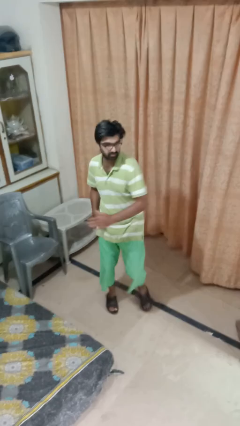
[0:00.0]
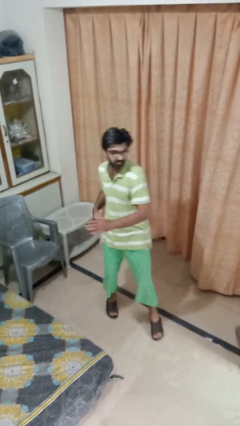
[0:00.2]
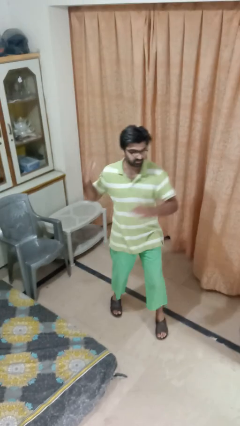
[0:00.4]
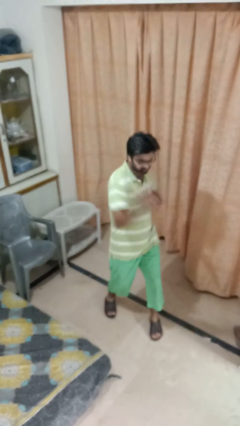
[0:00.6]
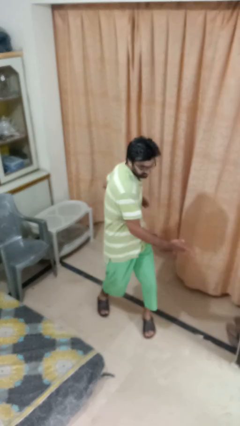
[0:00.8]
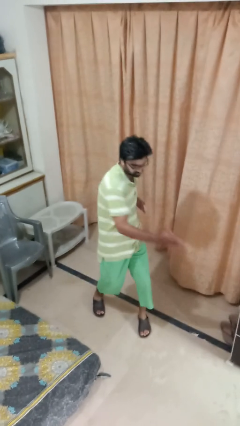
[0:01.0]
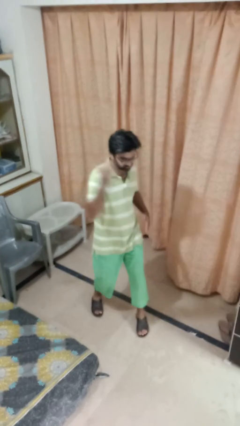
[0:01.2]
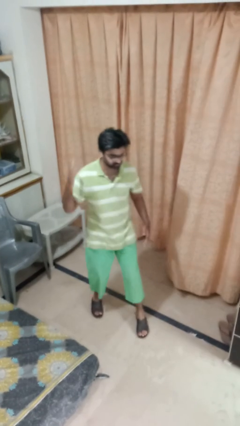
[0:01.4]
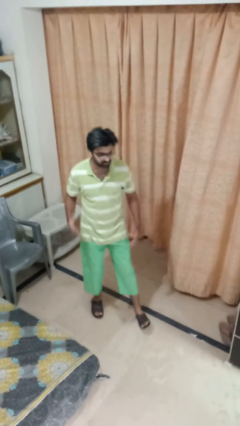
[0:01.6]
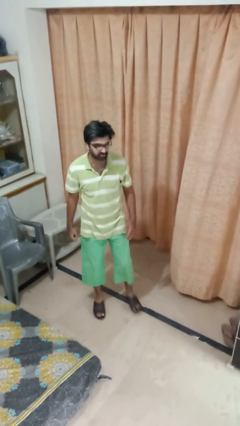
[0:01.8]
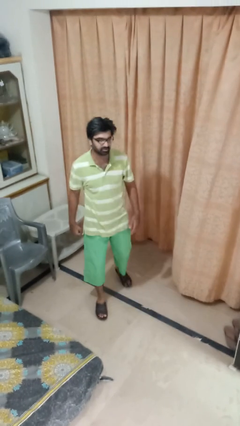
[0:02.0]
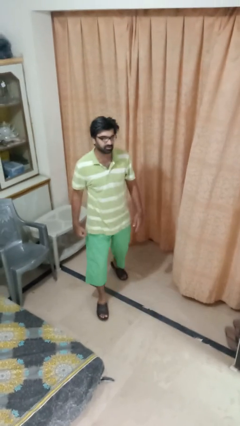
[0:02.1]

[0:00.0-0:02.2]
person karate chop

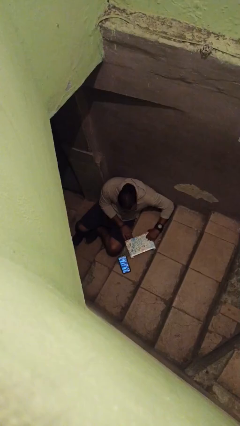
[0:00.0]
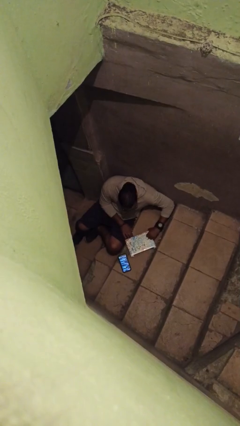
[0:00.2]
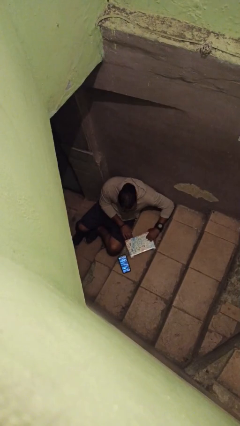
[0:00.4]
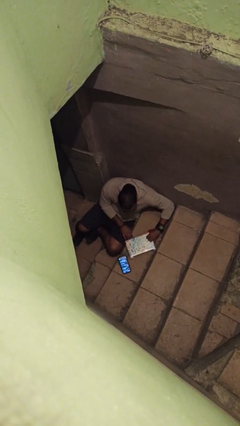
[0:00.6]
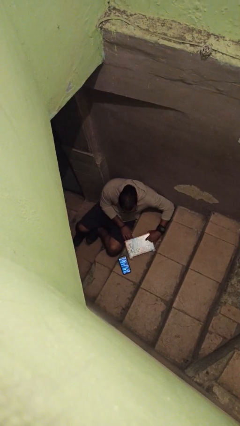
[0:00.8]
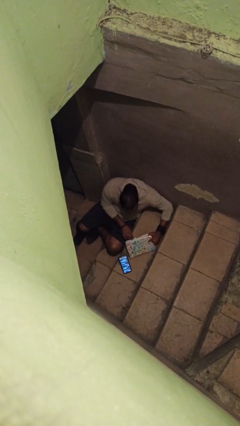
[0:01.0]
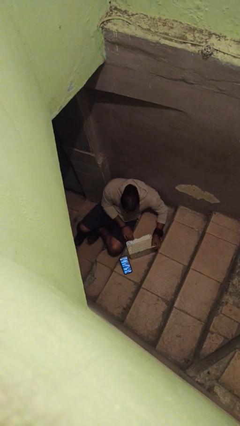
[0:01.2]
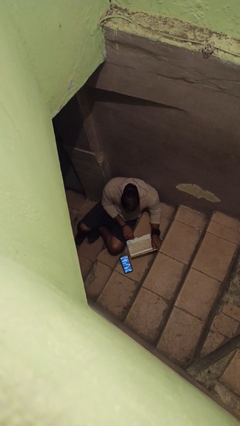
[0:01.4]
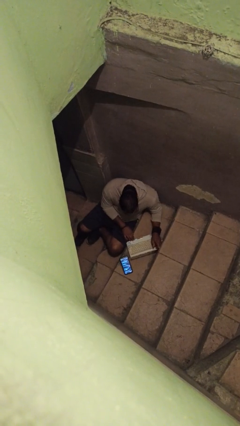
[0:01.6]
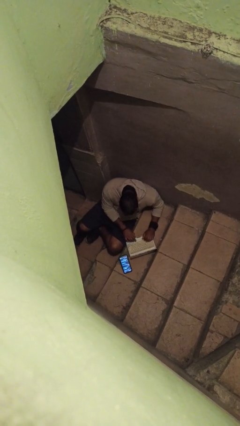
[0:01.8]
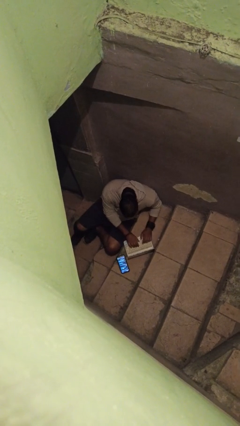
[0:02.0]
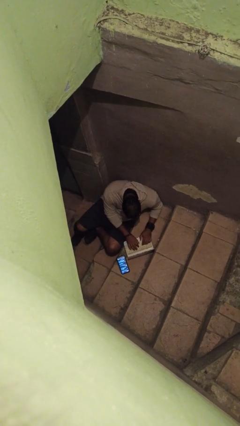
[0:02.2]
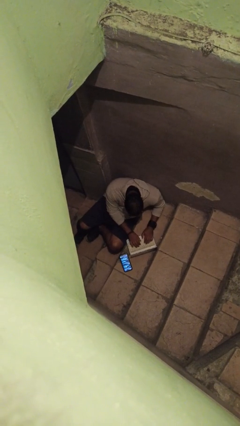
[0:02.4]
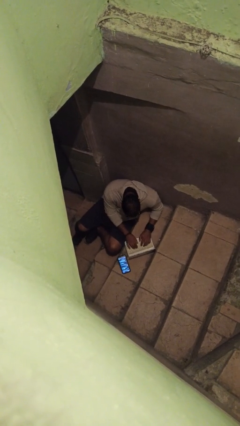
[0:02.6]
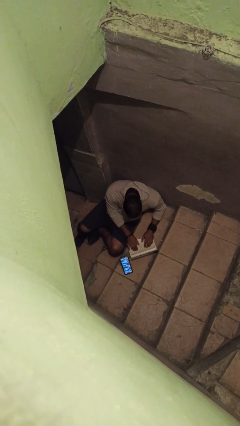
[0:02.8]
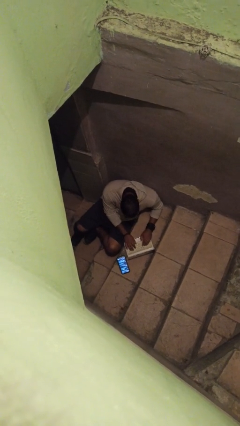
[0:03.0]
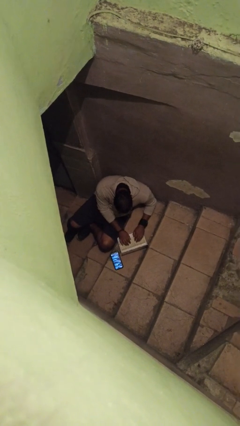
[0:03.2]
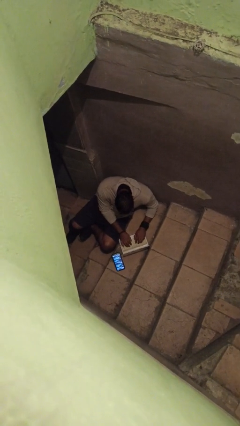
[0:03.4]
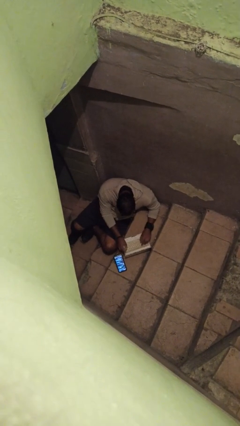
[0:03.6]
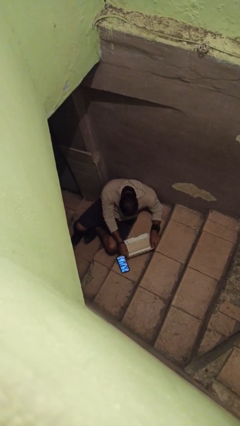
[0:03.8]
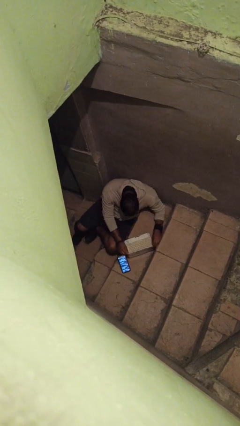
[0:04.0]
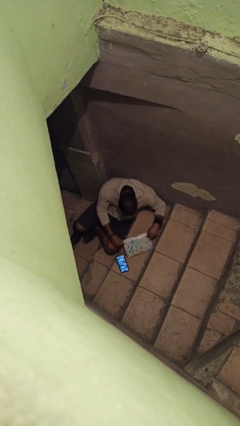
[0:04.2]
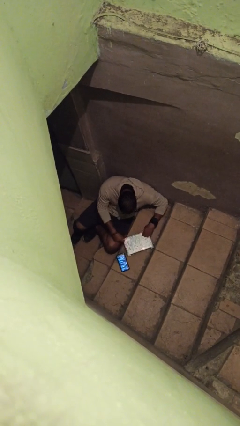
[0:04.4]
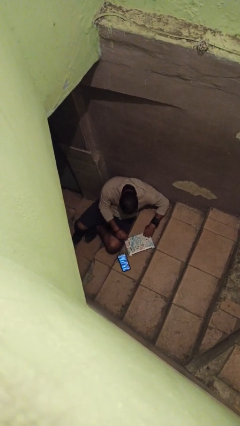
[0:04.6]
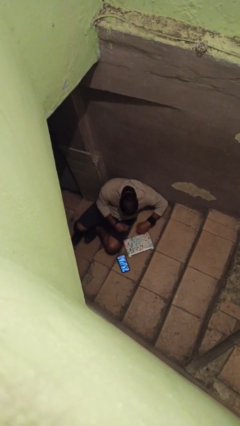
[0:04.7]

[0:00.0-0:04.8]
person interacts with laptop

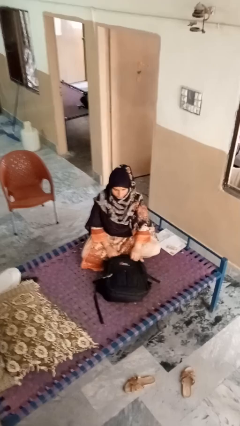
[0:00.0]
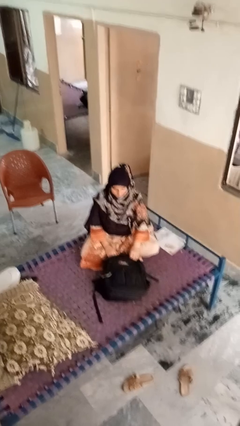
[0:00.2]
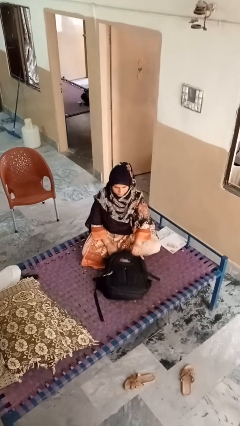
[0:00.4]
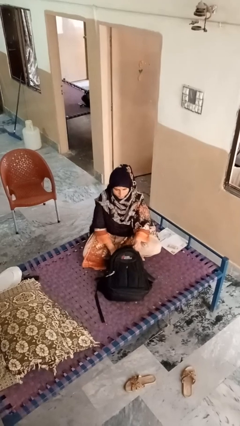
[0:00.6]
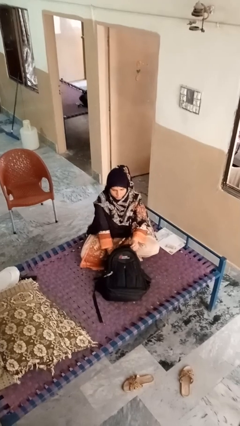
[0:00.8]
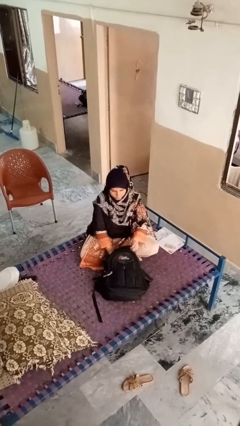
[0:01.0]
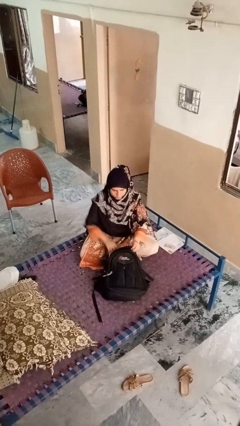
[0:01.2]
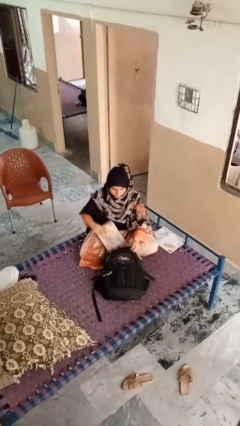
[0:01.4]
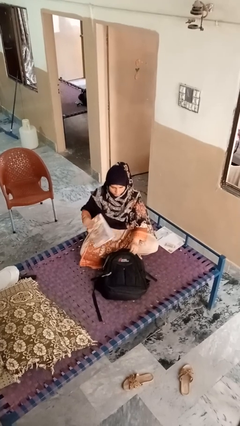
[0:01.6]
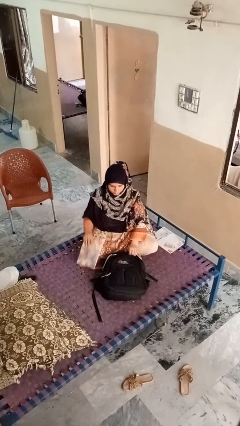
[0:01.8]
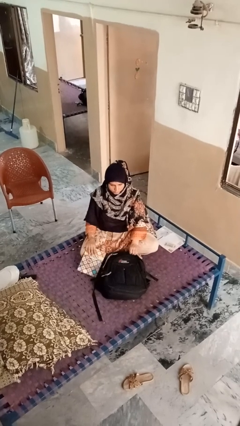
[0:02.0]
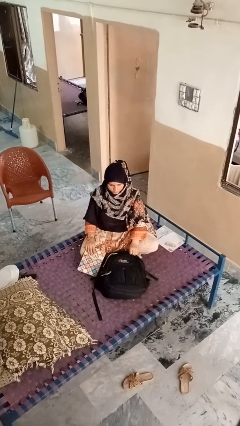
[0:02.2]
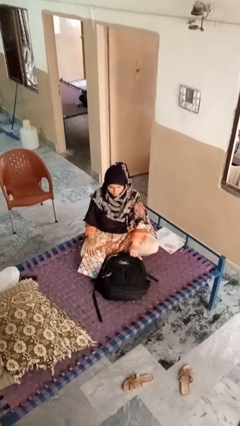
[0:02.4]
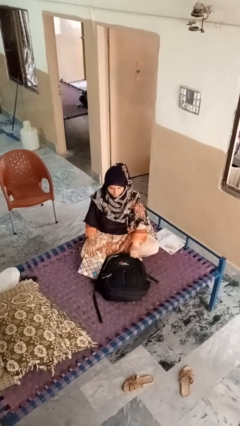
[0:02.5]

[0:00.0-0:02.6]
person takes object from bag

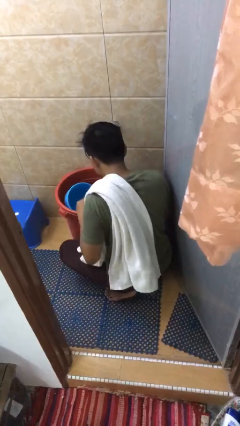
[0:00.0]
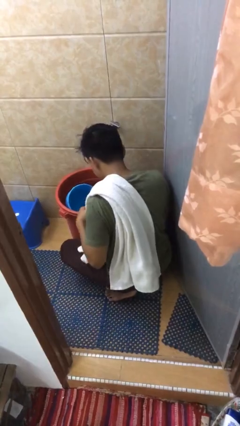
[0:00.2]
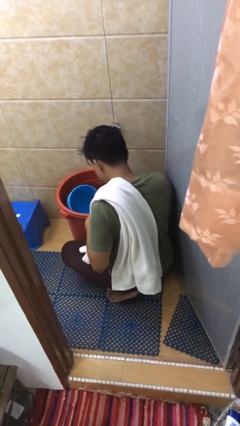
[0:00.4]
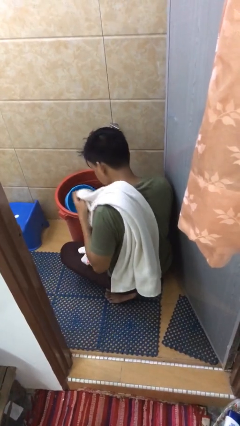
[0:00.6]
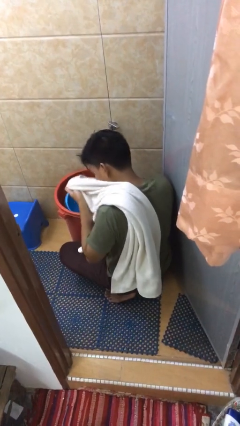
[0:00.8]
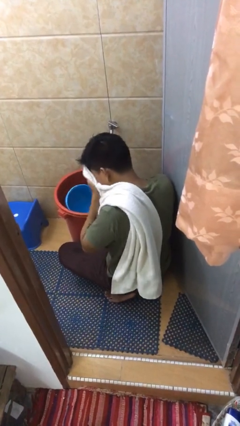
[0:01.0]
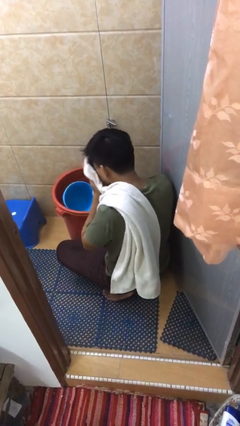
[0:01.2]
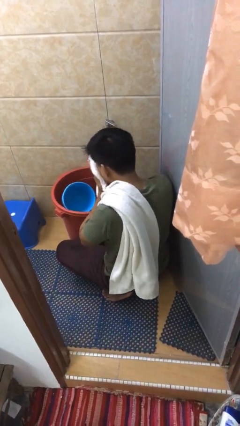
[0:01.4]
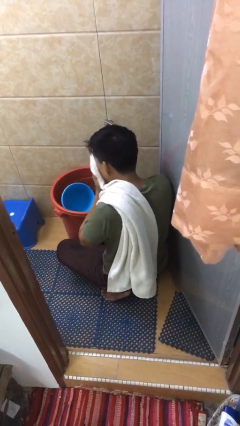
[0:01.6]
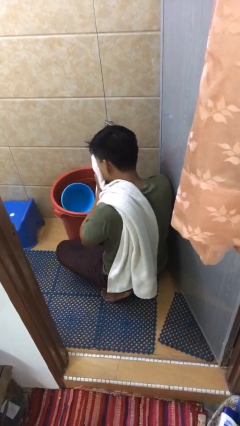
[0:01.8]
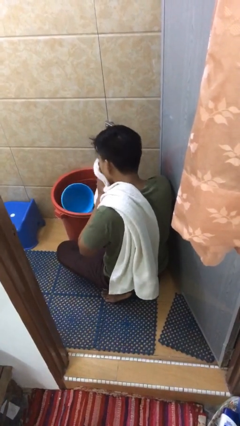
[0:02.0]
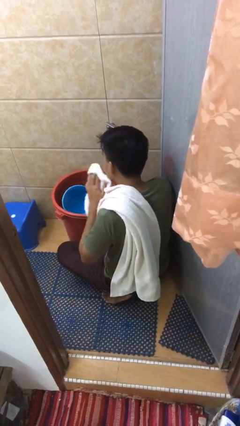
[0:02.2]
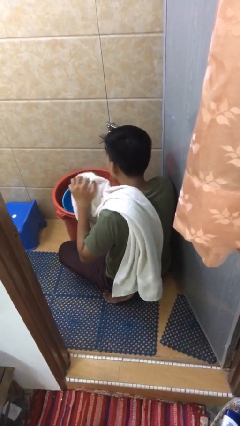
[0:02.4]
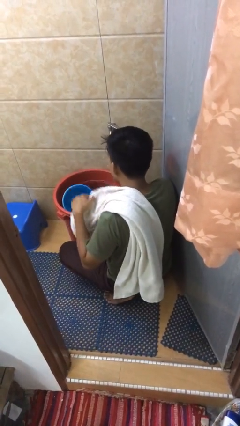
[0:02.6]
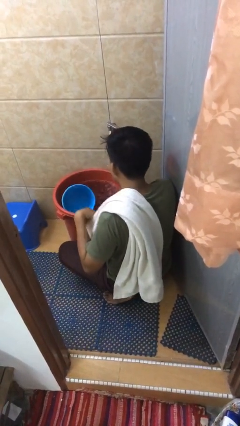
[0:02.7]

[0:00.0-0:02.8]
person dries face with towel

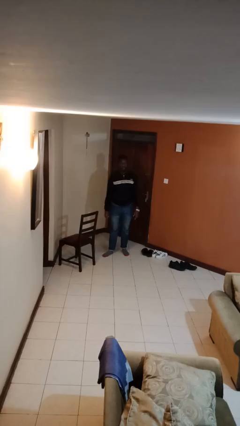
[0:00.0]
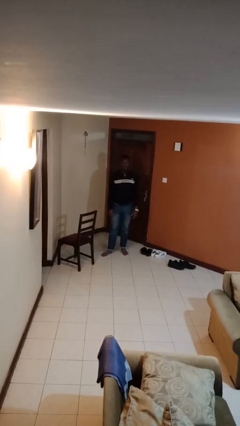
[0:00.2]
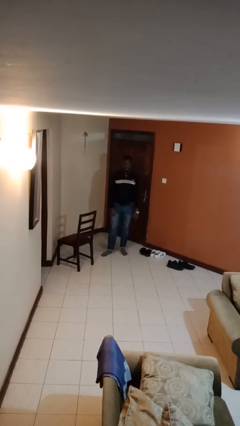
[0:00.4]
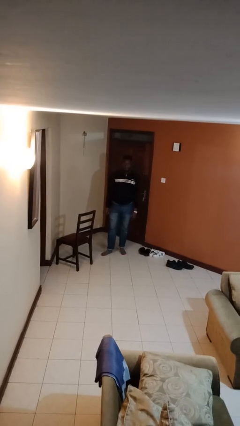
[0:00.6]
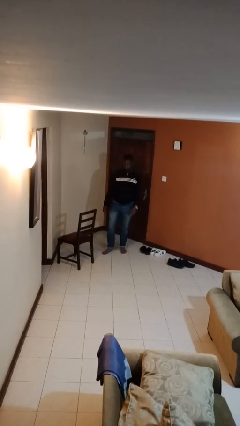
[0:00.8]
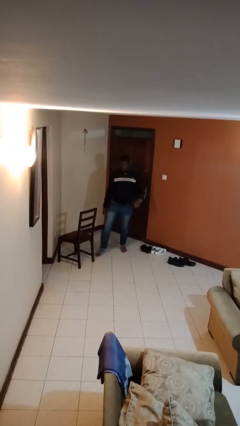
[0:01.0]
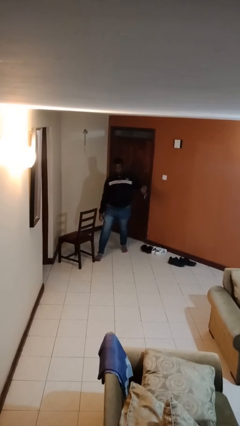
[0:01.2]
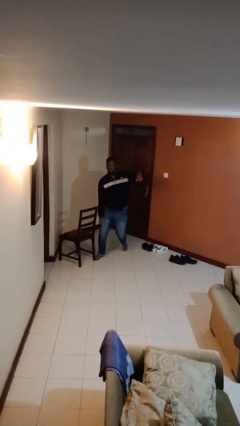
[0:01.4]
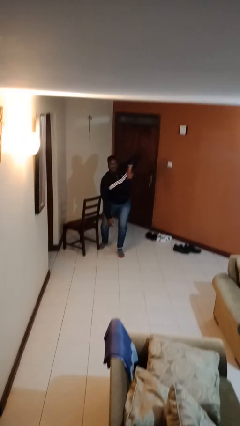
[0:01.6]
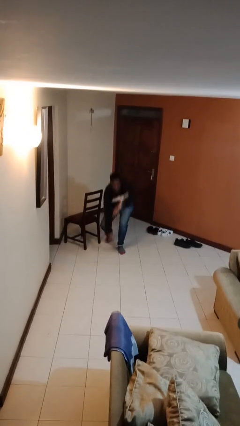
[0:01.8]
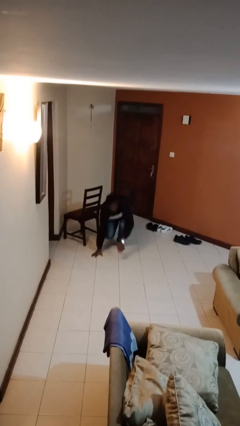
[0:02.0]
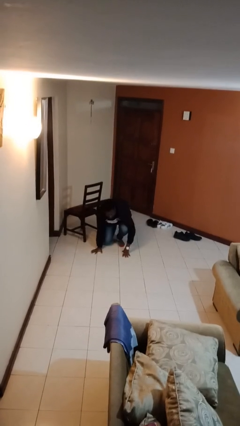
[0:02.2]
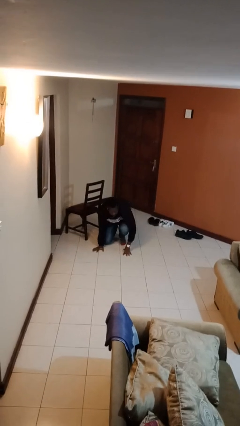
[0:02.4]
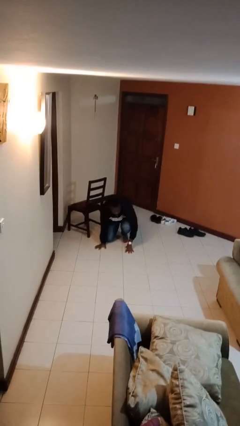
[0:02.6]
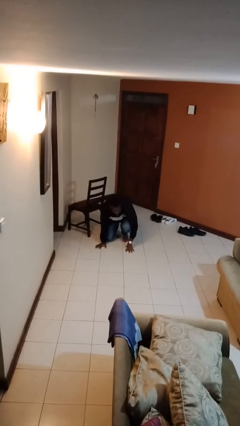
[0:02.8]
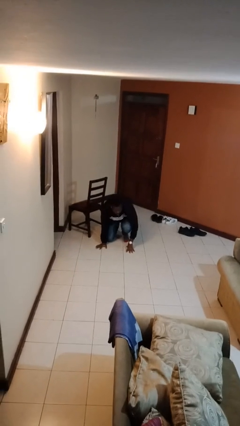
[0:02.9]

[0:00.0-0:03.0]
person trips on object on floor

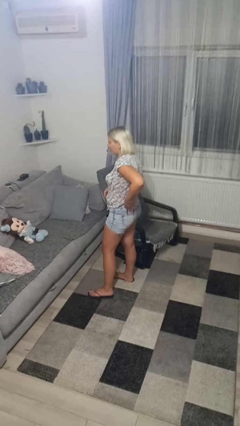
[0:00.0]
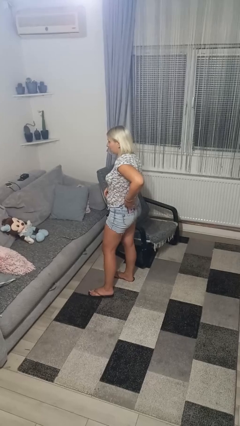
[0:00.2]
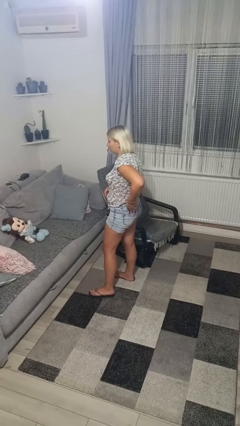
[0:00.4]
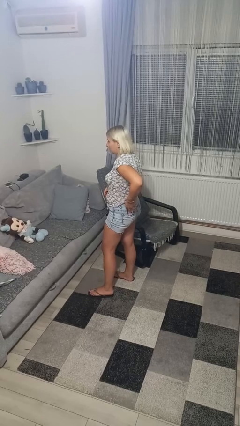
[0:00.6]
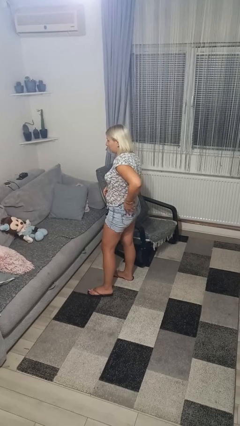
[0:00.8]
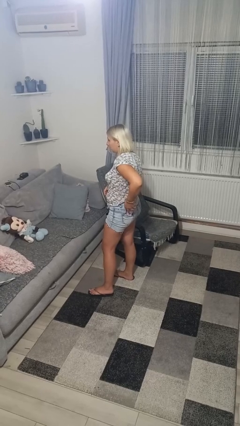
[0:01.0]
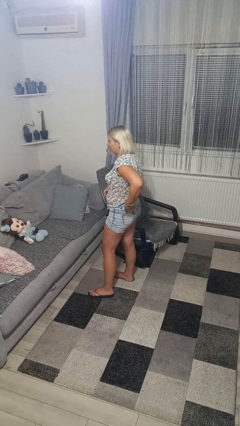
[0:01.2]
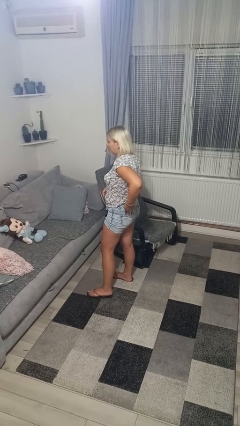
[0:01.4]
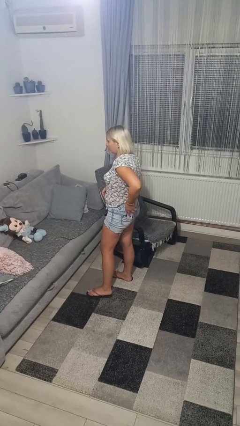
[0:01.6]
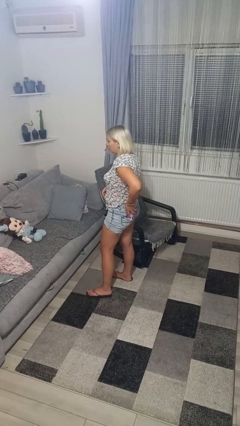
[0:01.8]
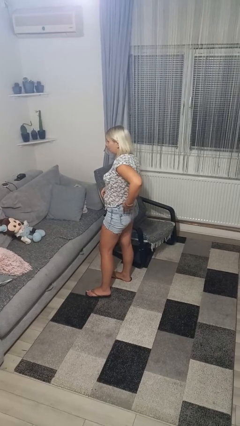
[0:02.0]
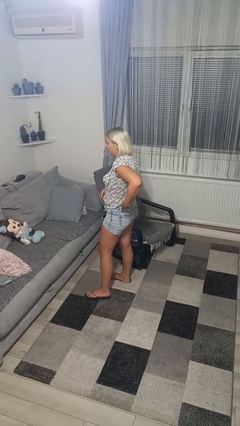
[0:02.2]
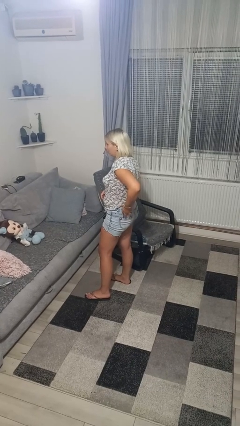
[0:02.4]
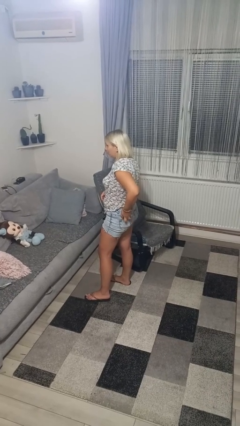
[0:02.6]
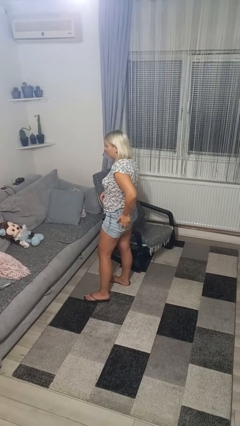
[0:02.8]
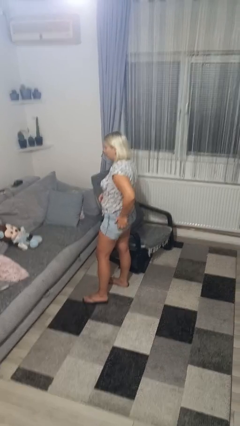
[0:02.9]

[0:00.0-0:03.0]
person puts phone into pocket
